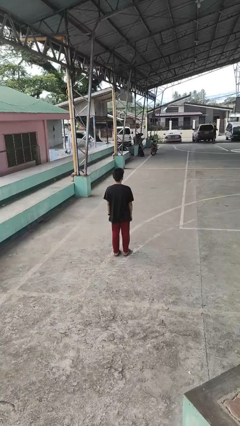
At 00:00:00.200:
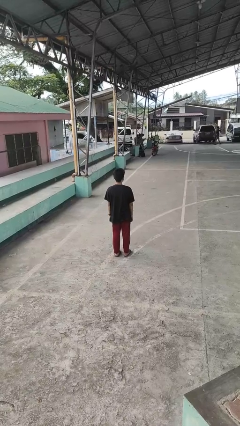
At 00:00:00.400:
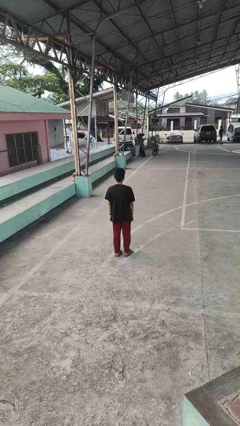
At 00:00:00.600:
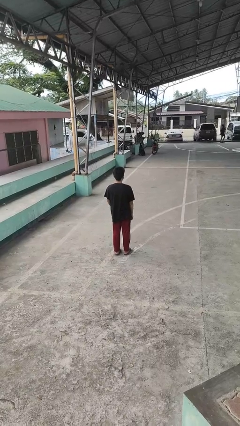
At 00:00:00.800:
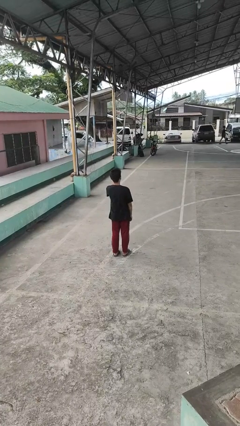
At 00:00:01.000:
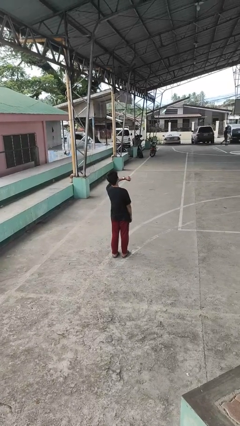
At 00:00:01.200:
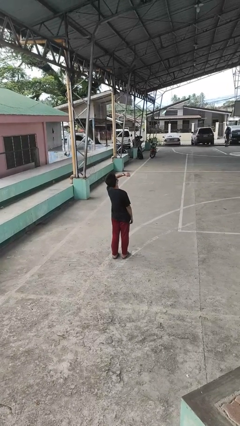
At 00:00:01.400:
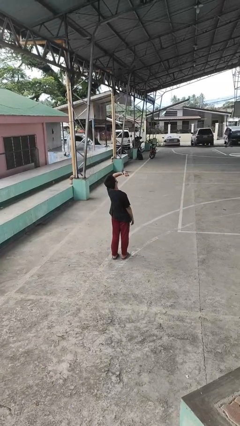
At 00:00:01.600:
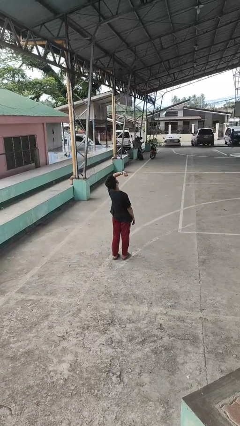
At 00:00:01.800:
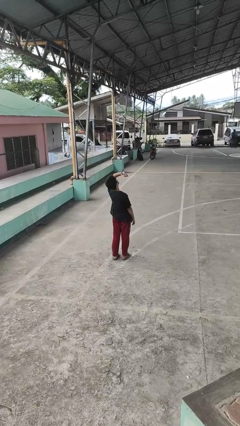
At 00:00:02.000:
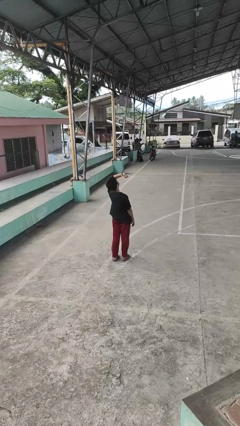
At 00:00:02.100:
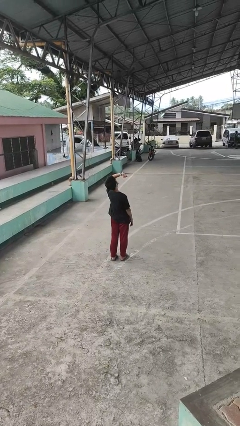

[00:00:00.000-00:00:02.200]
person looks at wristwatch

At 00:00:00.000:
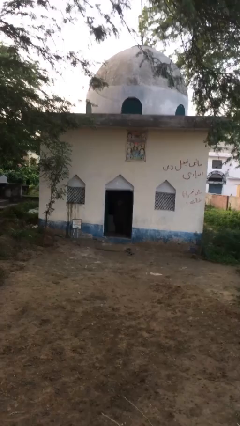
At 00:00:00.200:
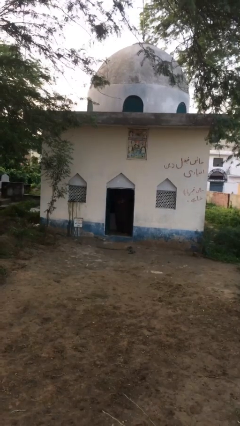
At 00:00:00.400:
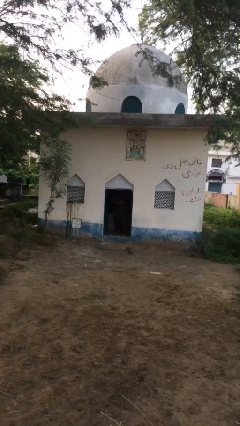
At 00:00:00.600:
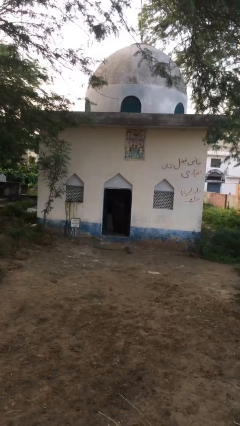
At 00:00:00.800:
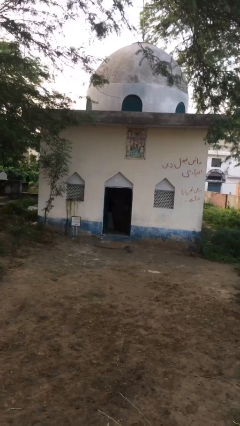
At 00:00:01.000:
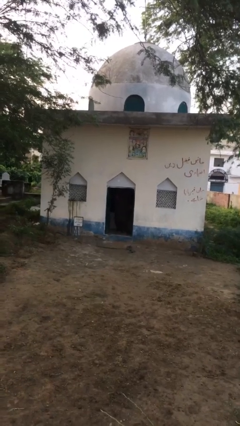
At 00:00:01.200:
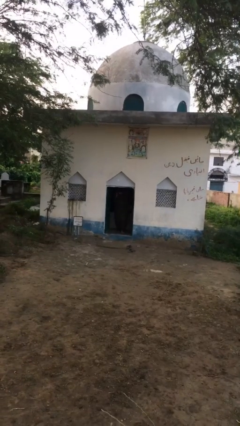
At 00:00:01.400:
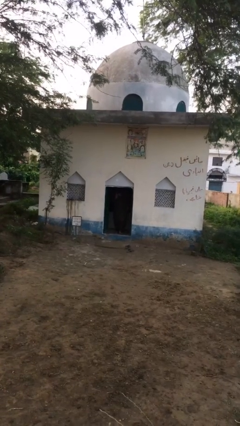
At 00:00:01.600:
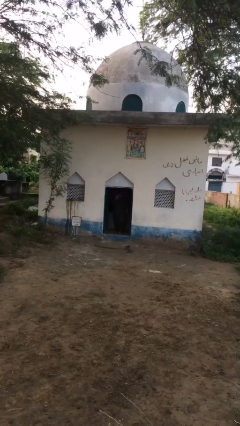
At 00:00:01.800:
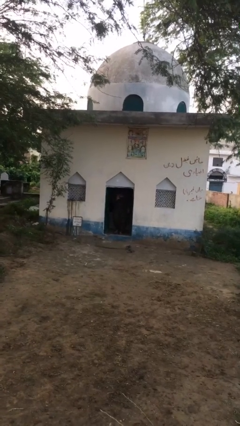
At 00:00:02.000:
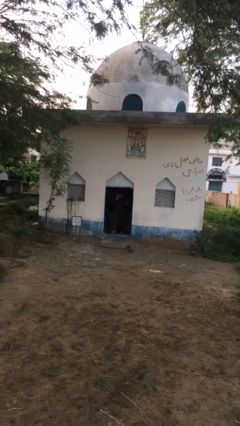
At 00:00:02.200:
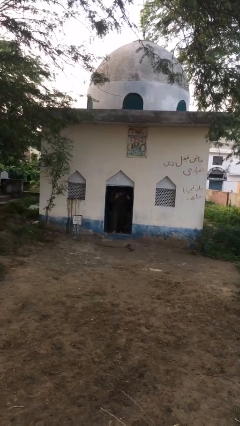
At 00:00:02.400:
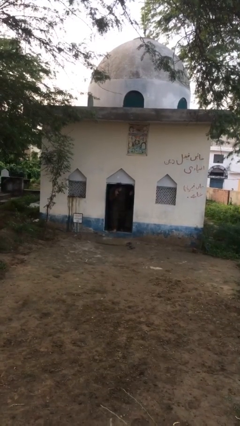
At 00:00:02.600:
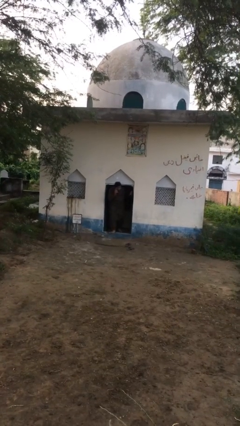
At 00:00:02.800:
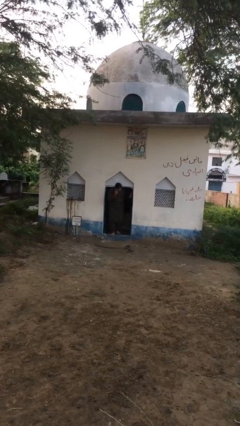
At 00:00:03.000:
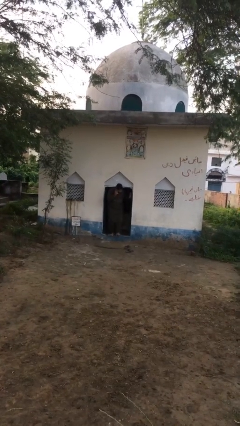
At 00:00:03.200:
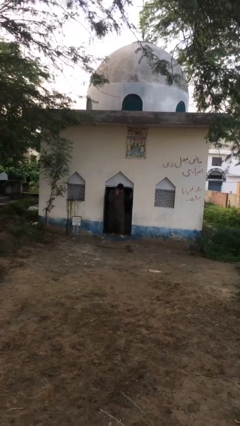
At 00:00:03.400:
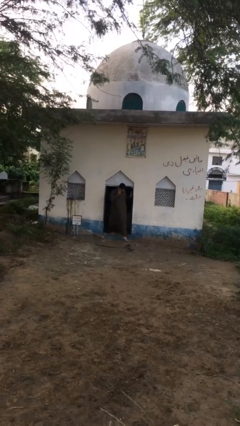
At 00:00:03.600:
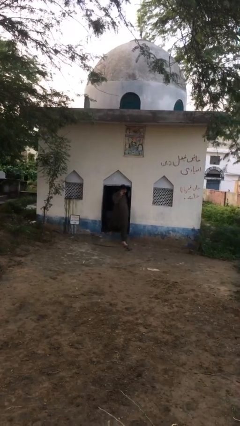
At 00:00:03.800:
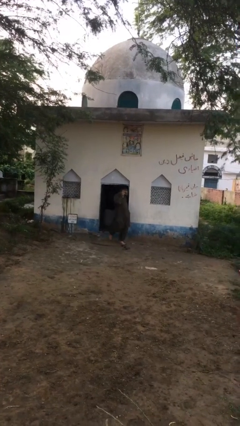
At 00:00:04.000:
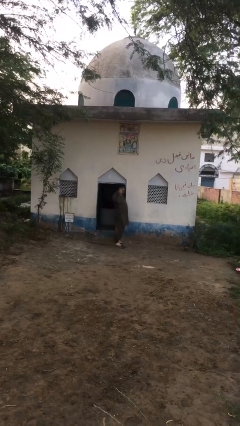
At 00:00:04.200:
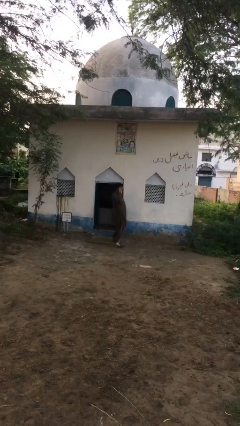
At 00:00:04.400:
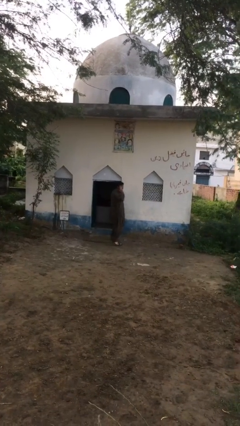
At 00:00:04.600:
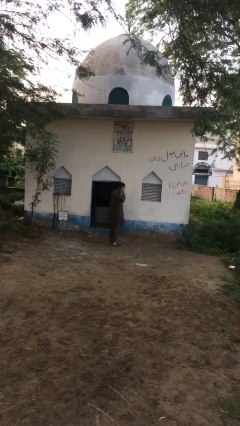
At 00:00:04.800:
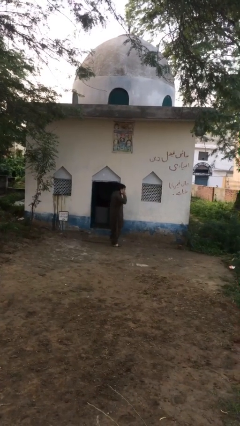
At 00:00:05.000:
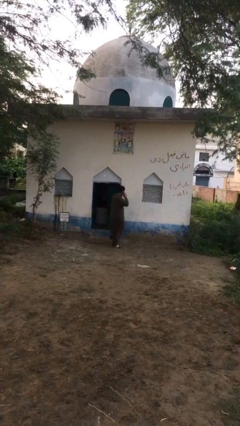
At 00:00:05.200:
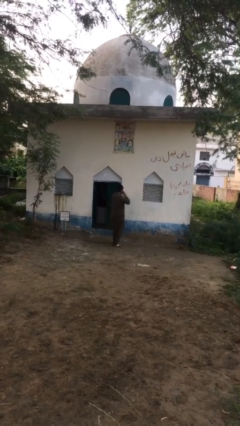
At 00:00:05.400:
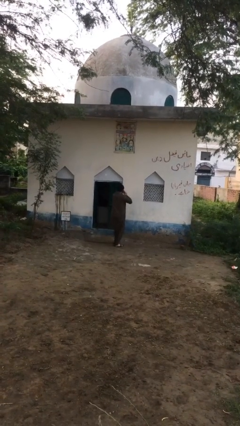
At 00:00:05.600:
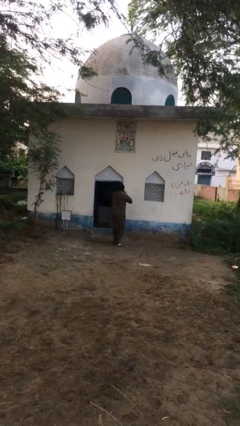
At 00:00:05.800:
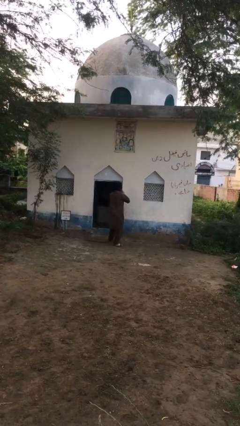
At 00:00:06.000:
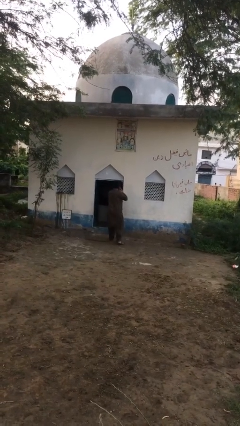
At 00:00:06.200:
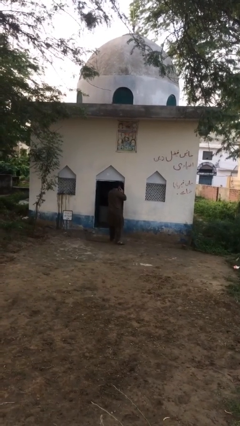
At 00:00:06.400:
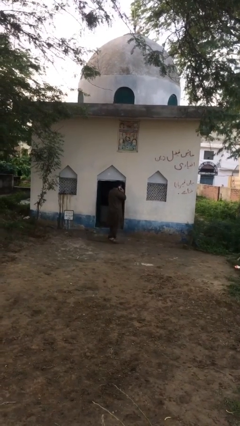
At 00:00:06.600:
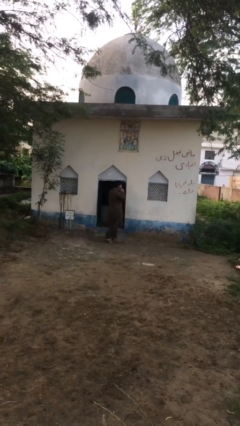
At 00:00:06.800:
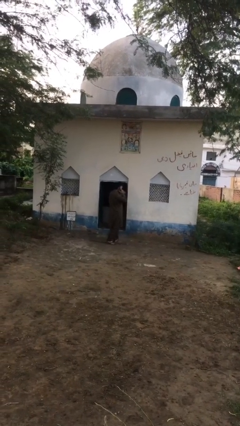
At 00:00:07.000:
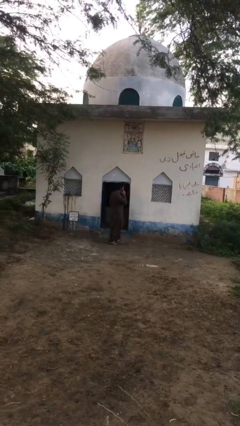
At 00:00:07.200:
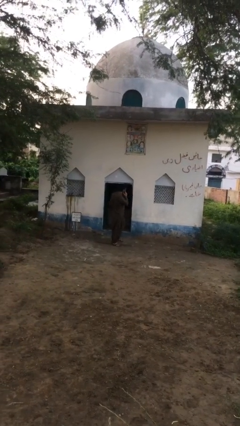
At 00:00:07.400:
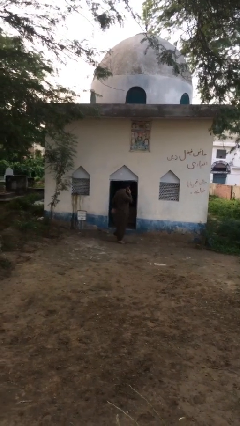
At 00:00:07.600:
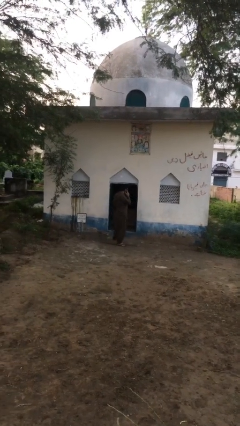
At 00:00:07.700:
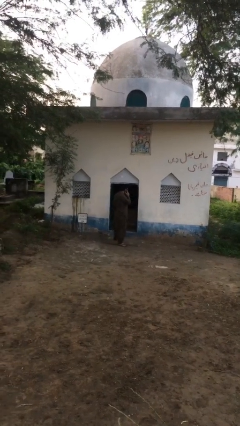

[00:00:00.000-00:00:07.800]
person enters scene through structure

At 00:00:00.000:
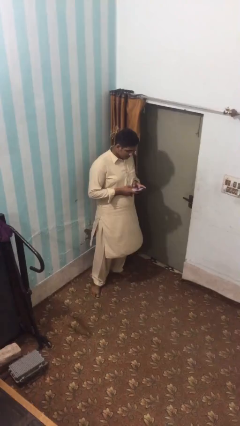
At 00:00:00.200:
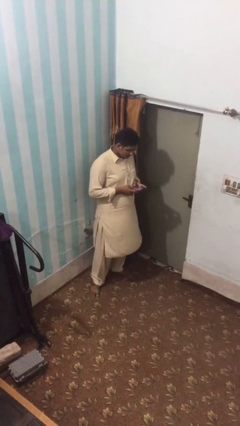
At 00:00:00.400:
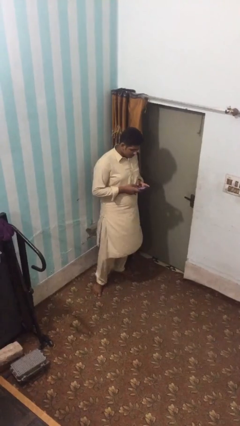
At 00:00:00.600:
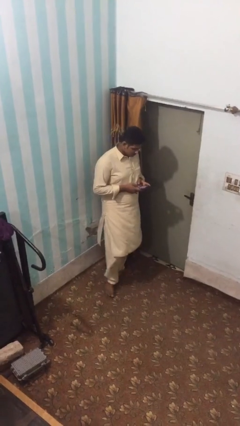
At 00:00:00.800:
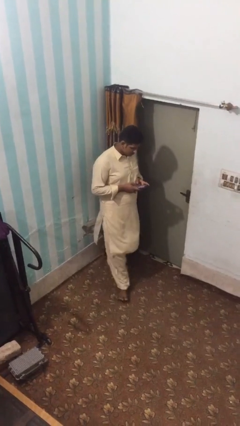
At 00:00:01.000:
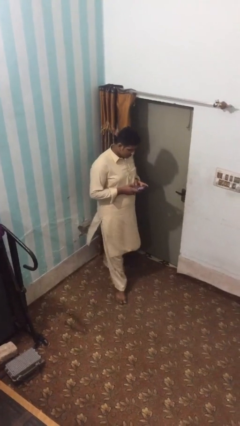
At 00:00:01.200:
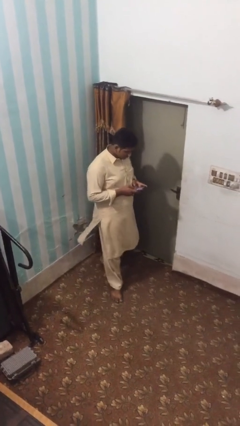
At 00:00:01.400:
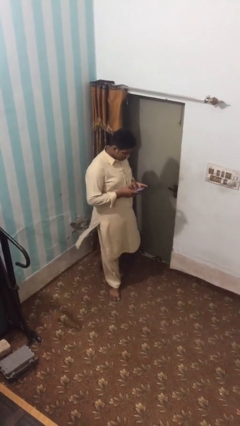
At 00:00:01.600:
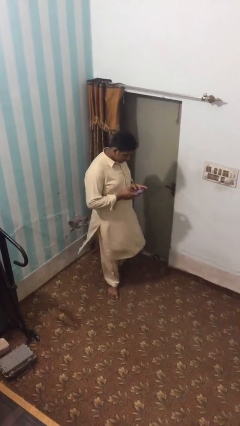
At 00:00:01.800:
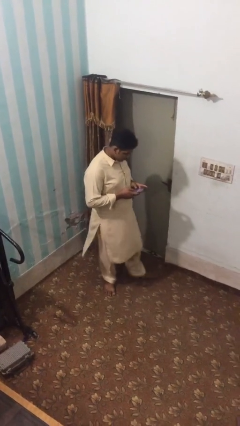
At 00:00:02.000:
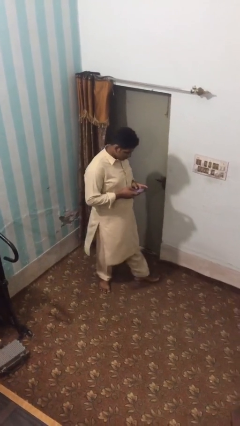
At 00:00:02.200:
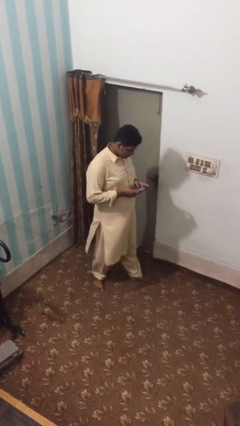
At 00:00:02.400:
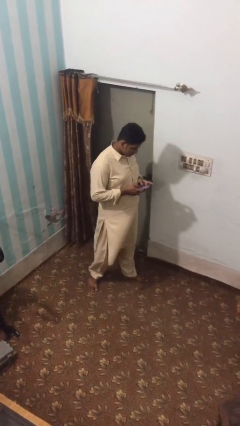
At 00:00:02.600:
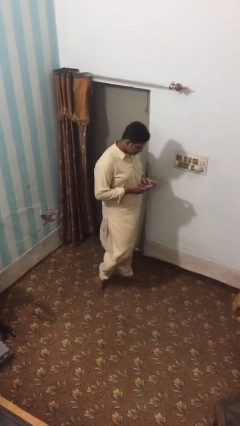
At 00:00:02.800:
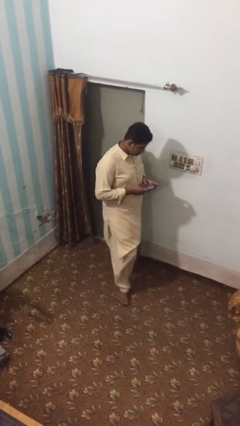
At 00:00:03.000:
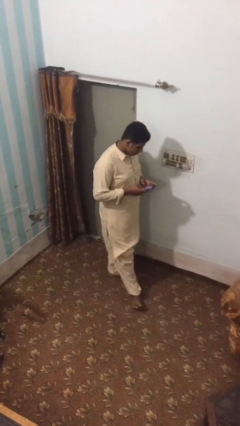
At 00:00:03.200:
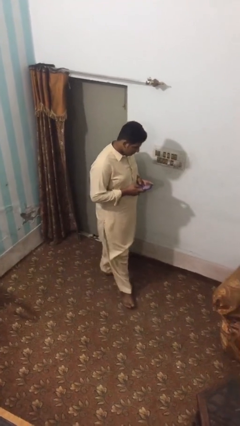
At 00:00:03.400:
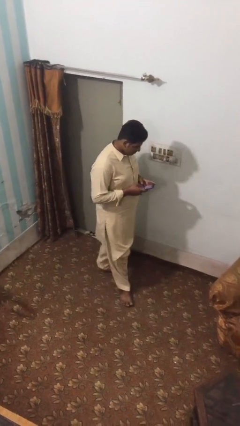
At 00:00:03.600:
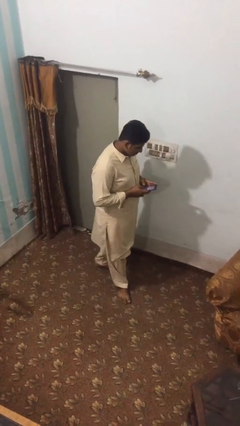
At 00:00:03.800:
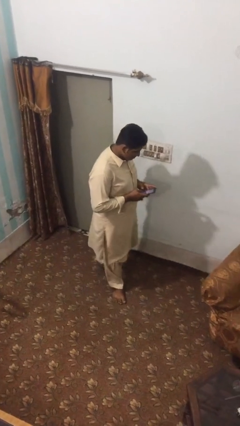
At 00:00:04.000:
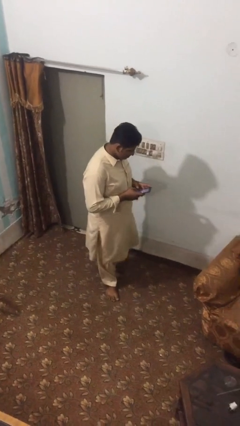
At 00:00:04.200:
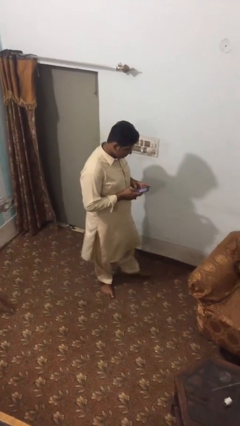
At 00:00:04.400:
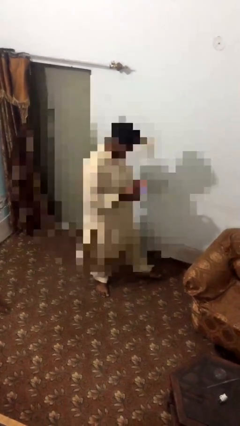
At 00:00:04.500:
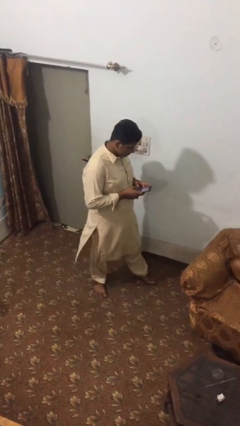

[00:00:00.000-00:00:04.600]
person texts on phone

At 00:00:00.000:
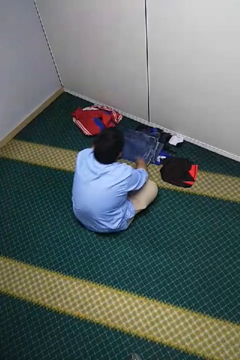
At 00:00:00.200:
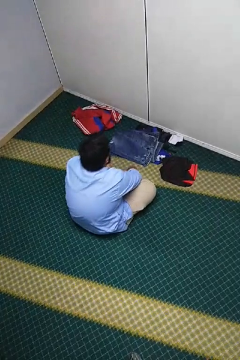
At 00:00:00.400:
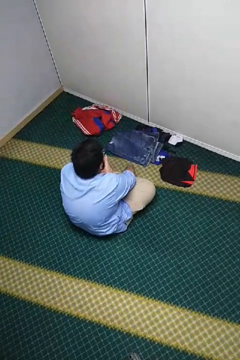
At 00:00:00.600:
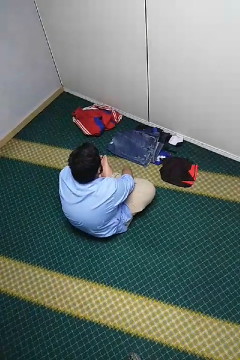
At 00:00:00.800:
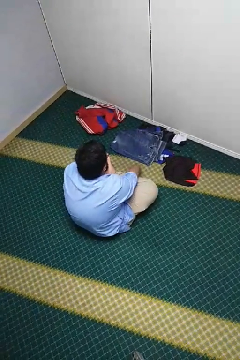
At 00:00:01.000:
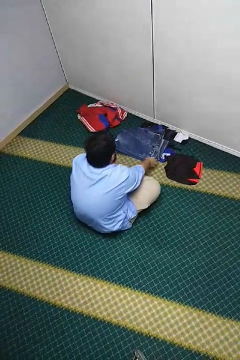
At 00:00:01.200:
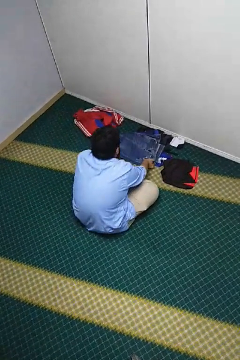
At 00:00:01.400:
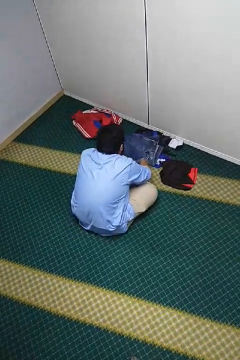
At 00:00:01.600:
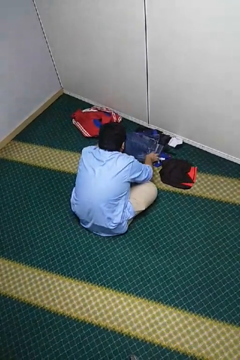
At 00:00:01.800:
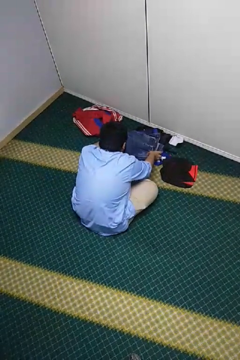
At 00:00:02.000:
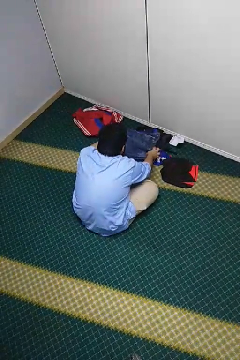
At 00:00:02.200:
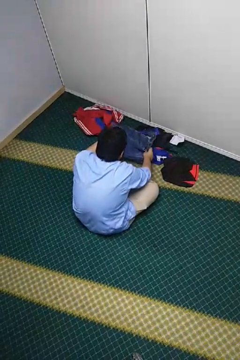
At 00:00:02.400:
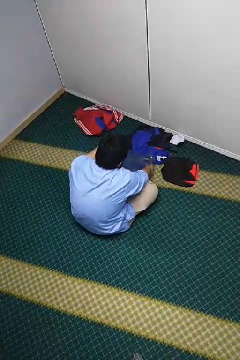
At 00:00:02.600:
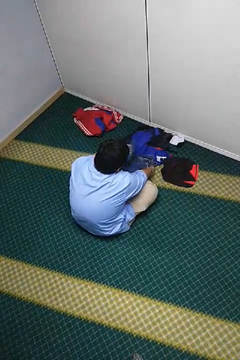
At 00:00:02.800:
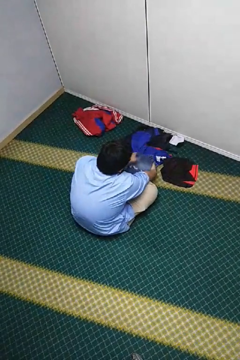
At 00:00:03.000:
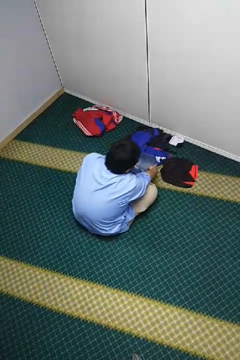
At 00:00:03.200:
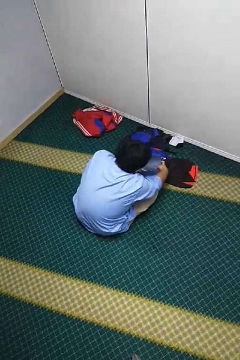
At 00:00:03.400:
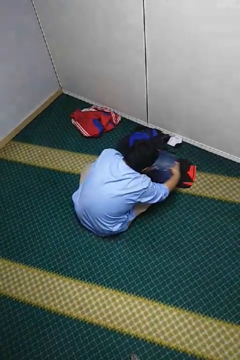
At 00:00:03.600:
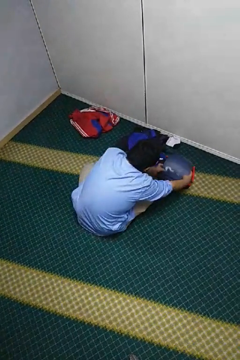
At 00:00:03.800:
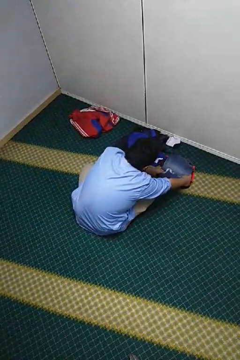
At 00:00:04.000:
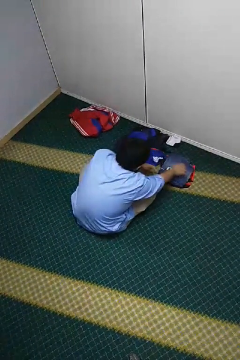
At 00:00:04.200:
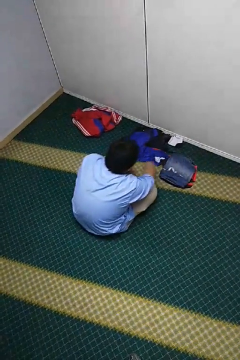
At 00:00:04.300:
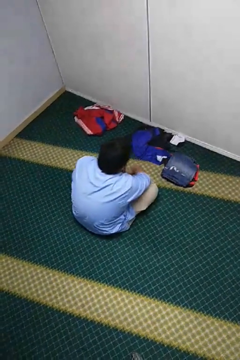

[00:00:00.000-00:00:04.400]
person folds pants
